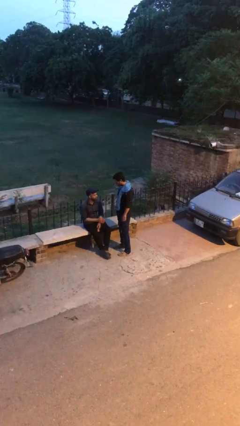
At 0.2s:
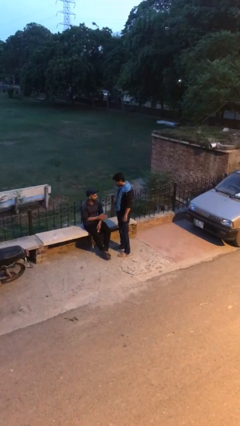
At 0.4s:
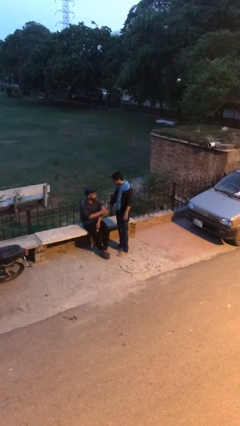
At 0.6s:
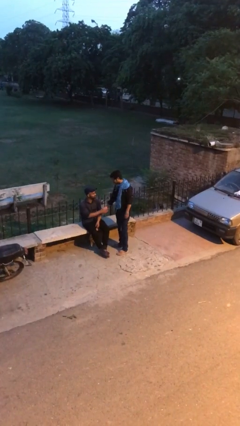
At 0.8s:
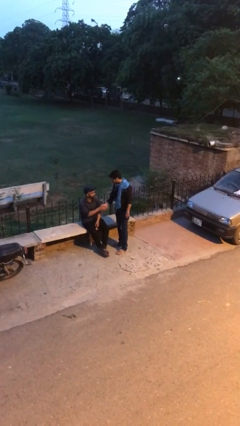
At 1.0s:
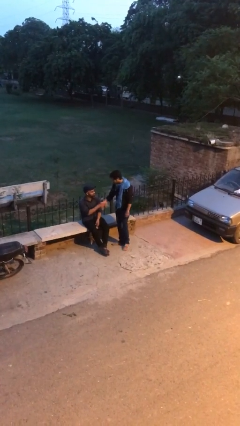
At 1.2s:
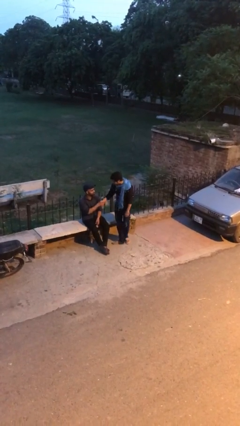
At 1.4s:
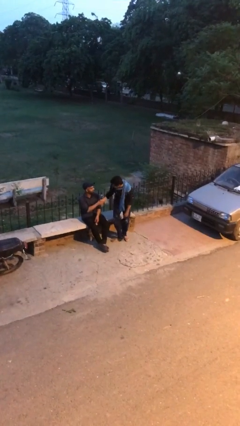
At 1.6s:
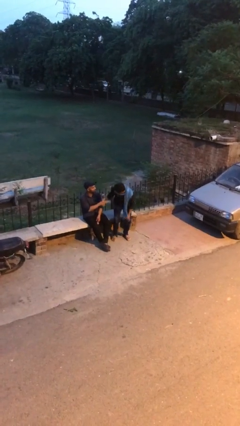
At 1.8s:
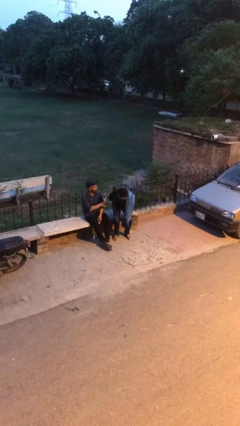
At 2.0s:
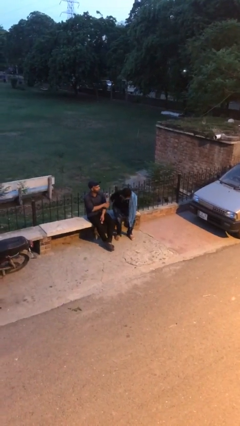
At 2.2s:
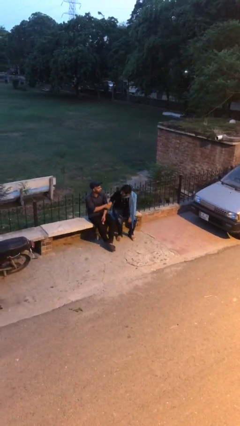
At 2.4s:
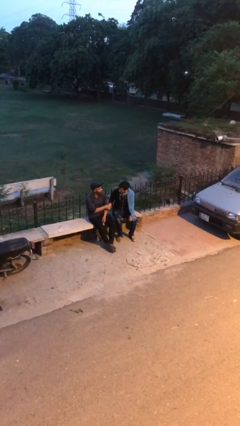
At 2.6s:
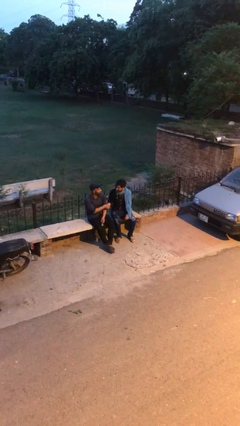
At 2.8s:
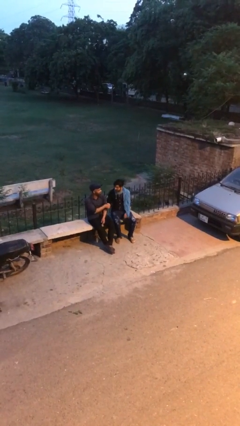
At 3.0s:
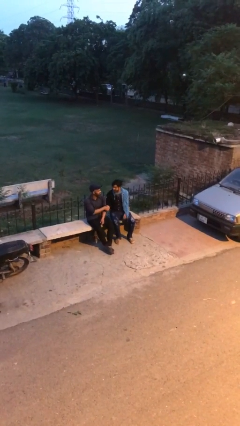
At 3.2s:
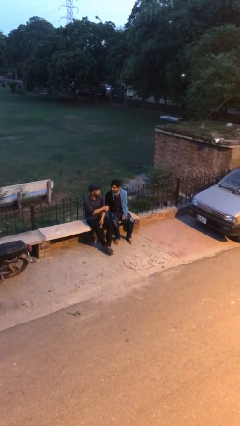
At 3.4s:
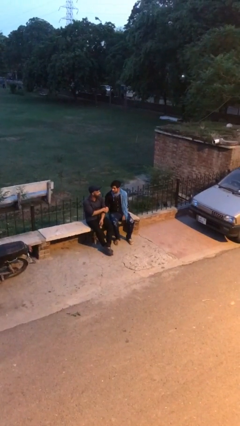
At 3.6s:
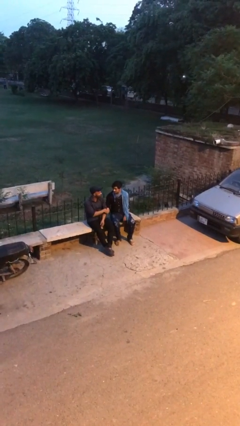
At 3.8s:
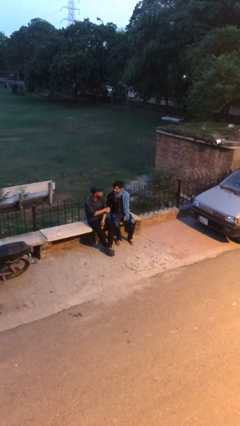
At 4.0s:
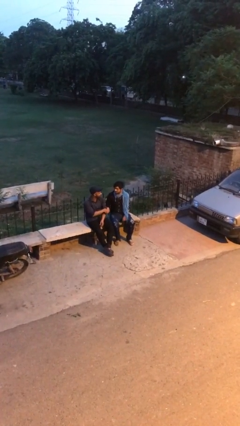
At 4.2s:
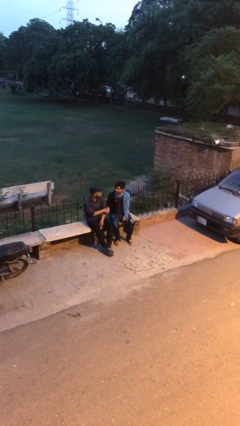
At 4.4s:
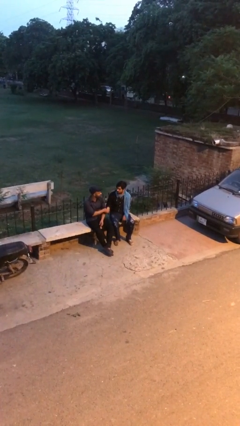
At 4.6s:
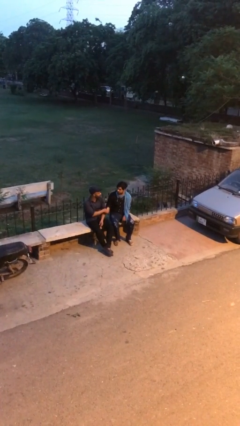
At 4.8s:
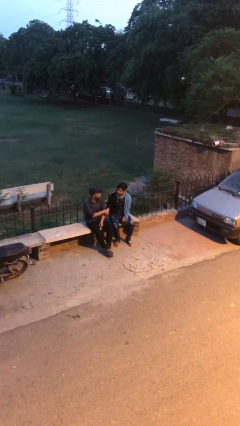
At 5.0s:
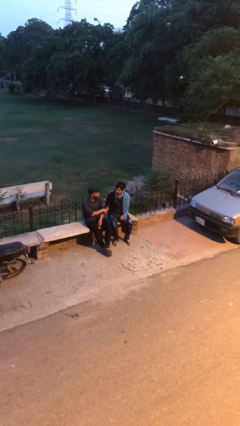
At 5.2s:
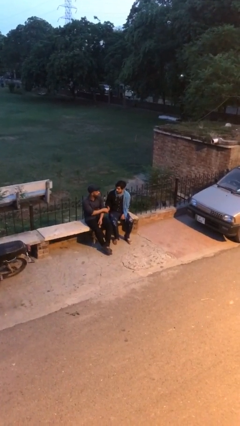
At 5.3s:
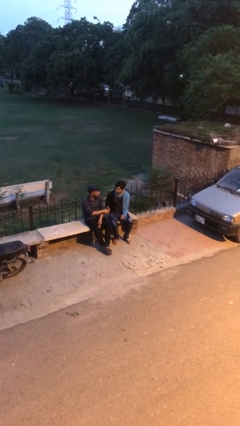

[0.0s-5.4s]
person shakes hand

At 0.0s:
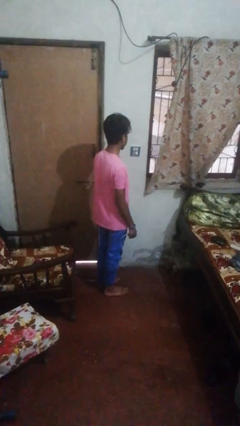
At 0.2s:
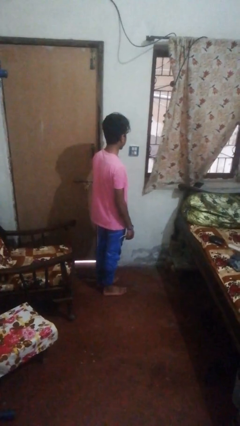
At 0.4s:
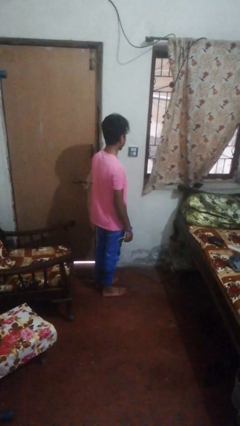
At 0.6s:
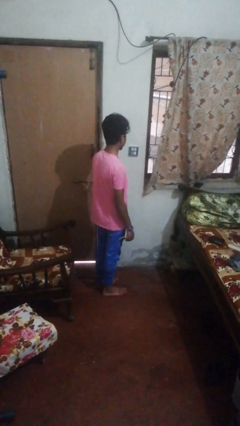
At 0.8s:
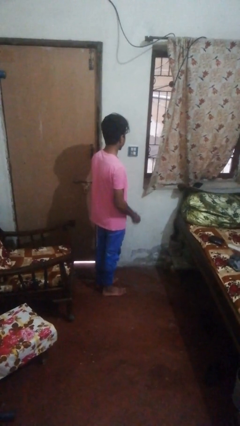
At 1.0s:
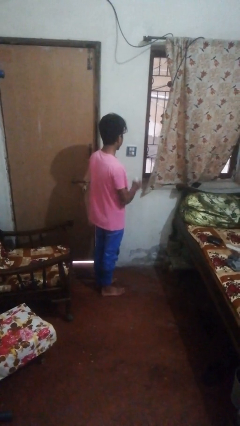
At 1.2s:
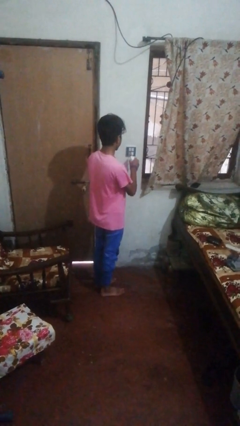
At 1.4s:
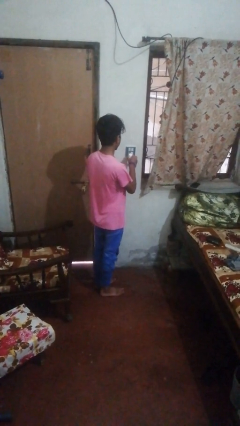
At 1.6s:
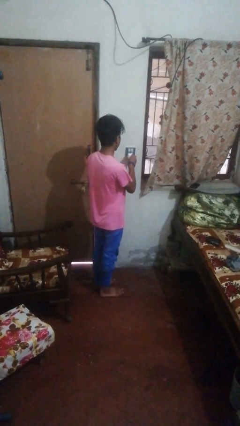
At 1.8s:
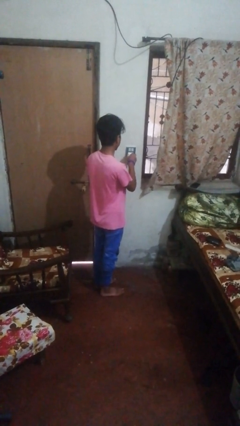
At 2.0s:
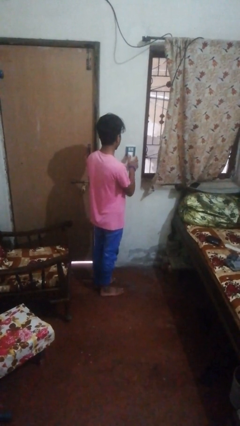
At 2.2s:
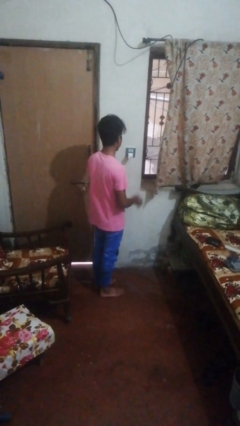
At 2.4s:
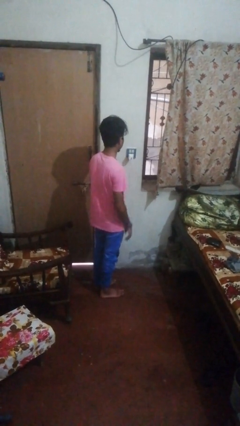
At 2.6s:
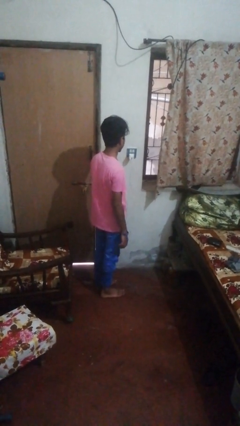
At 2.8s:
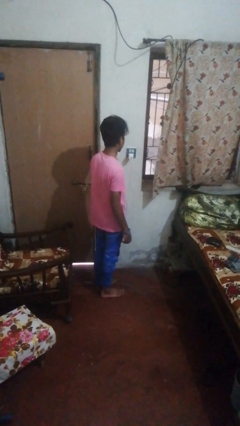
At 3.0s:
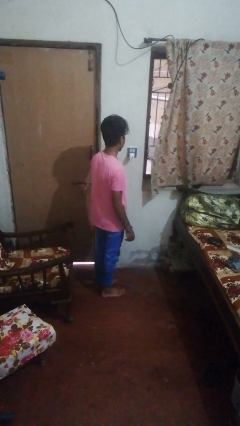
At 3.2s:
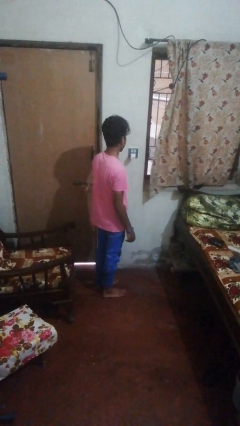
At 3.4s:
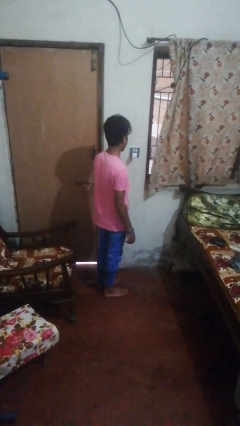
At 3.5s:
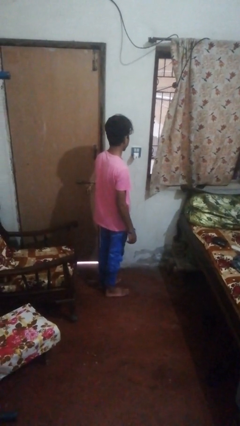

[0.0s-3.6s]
person plugs into electrical socket

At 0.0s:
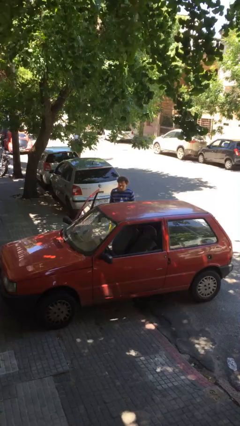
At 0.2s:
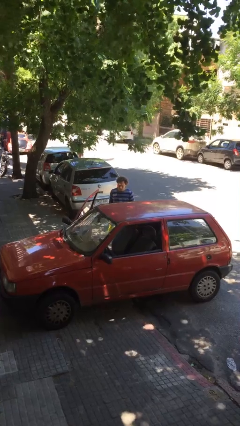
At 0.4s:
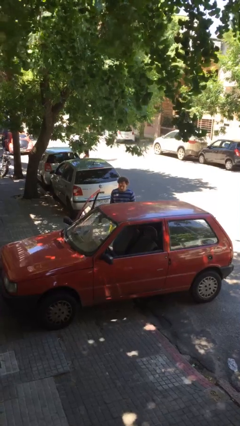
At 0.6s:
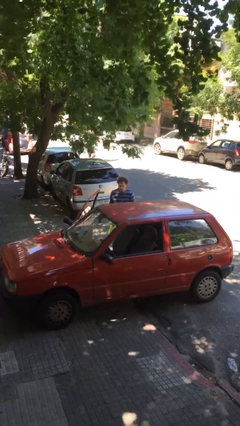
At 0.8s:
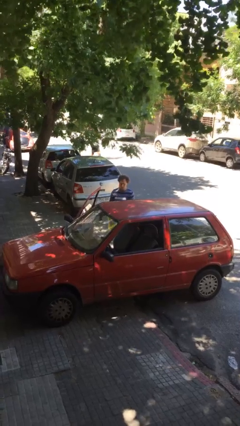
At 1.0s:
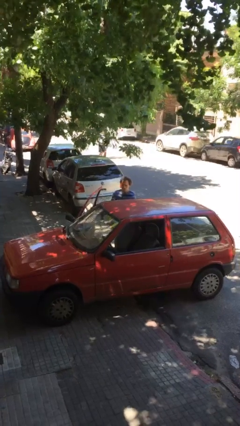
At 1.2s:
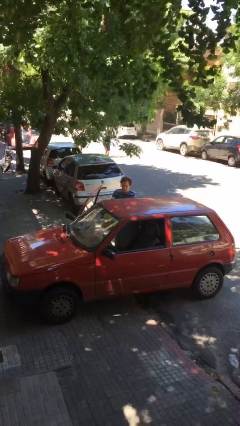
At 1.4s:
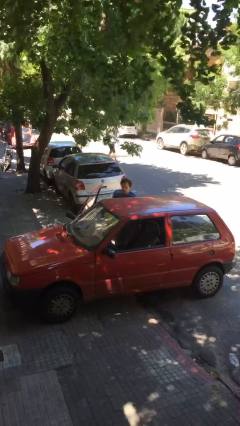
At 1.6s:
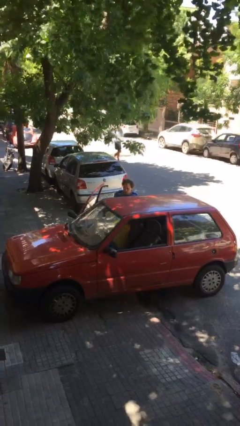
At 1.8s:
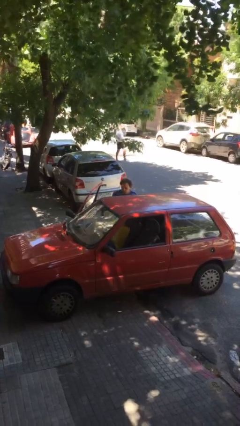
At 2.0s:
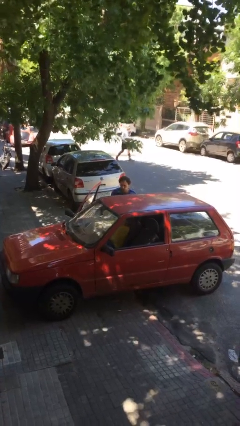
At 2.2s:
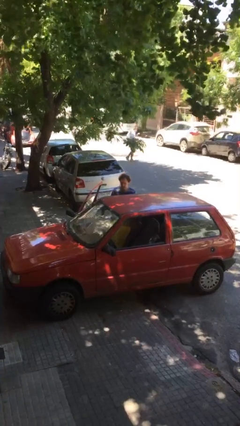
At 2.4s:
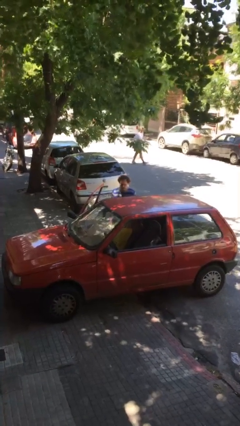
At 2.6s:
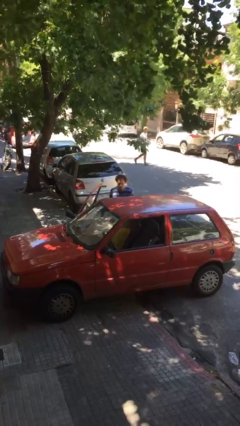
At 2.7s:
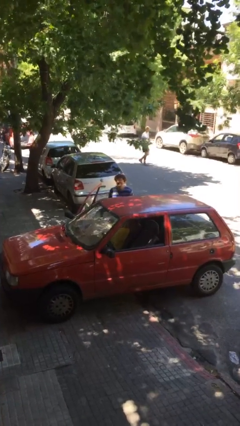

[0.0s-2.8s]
person loads car

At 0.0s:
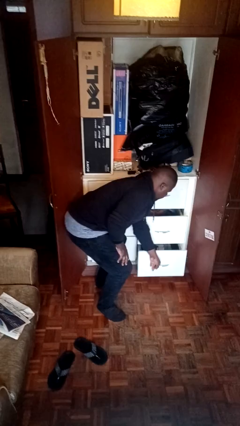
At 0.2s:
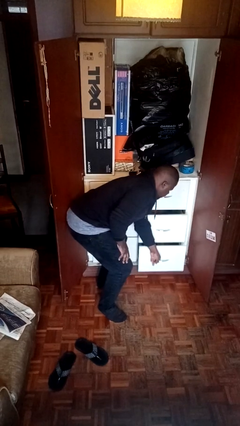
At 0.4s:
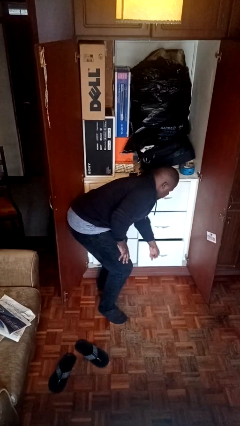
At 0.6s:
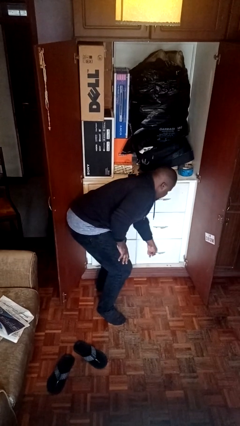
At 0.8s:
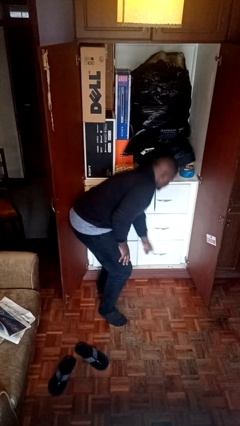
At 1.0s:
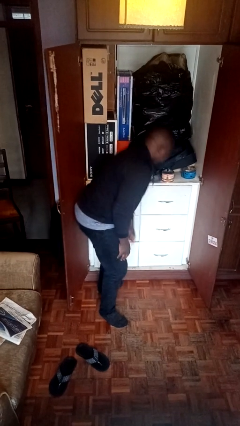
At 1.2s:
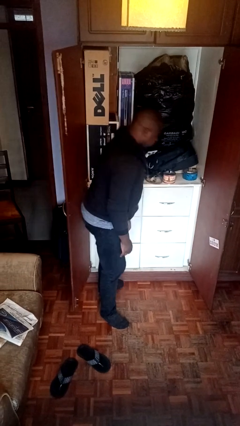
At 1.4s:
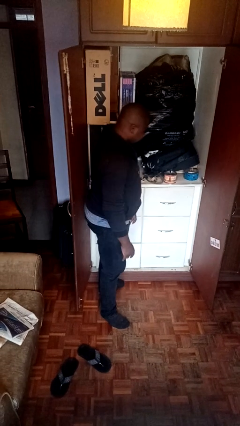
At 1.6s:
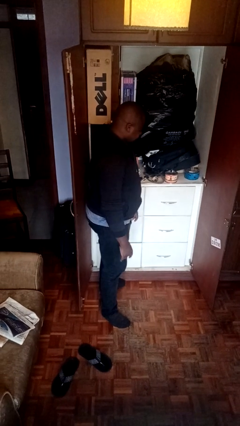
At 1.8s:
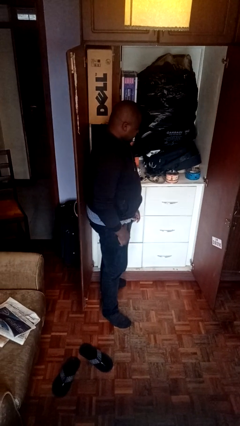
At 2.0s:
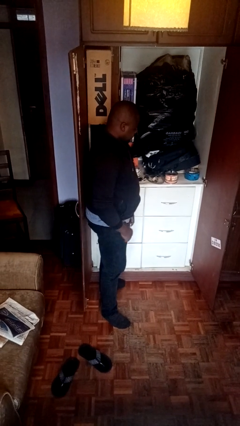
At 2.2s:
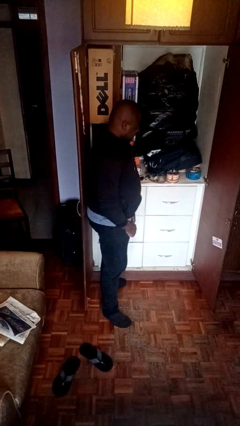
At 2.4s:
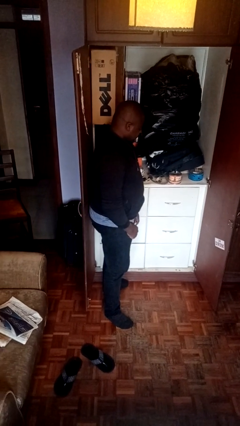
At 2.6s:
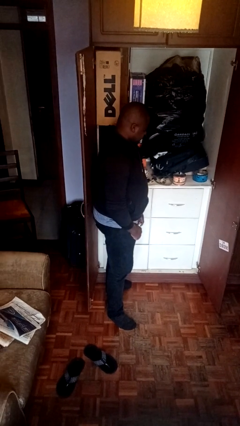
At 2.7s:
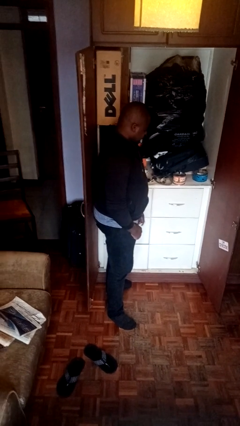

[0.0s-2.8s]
person closes dresser drawer

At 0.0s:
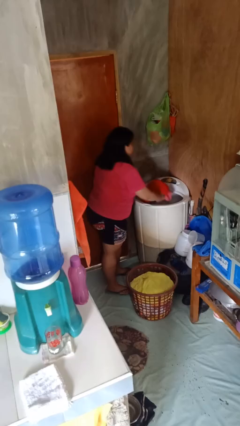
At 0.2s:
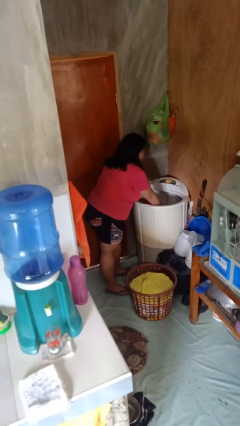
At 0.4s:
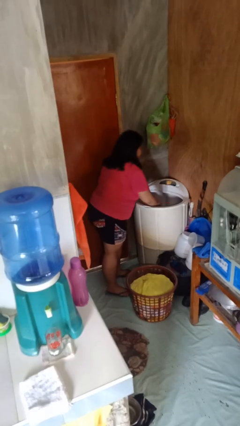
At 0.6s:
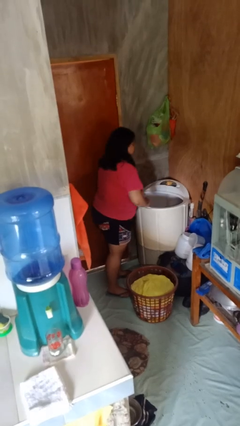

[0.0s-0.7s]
person loads clotheswasher

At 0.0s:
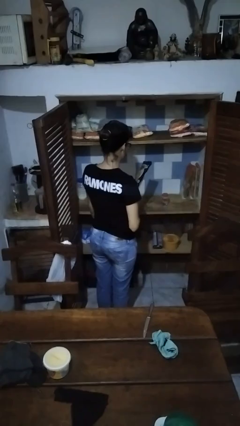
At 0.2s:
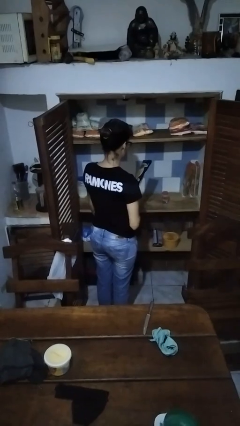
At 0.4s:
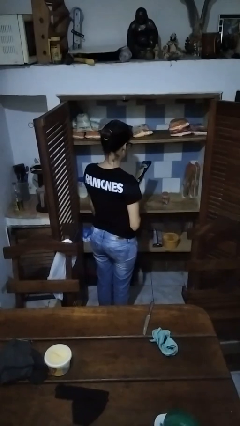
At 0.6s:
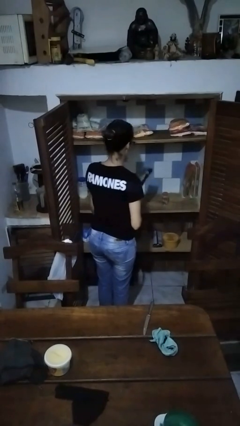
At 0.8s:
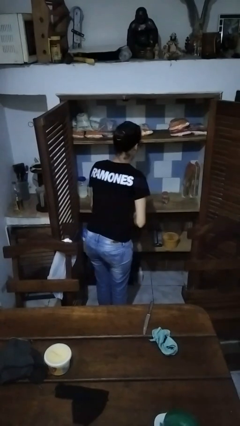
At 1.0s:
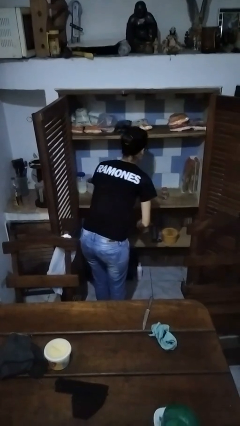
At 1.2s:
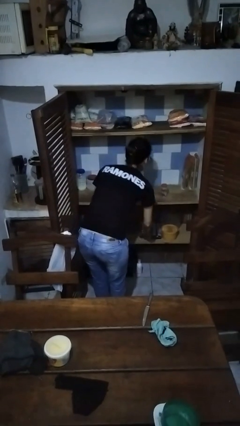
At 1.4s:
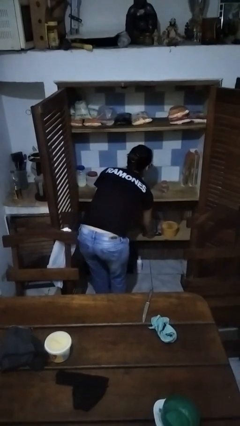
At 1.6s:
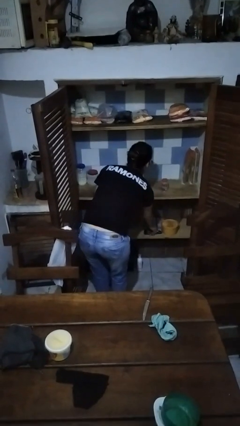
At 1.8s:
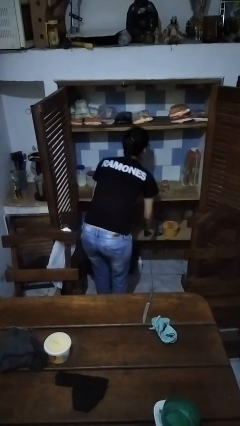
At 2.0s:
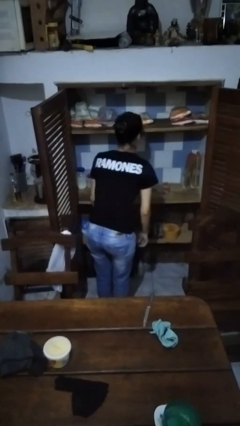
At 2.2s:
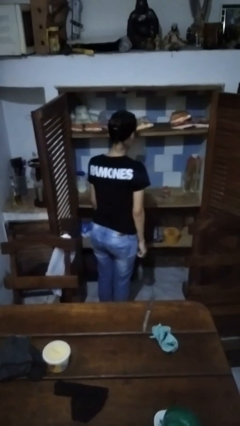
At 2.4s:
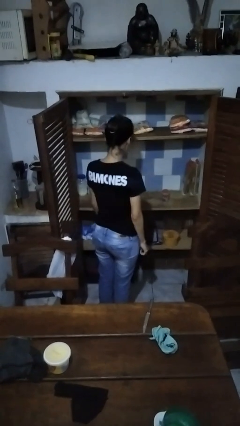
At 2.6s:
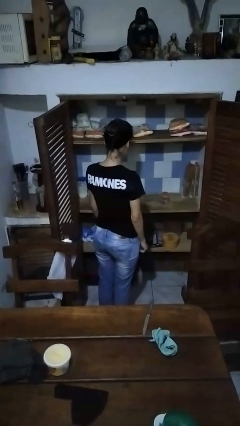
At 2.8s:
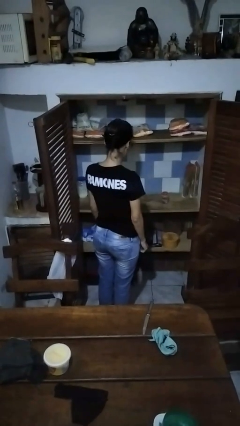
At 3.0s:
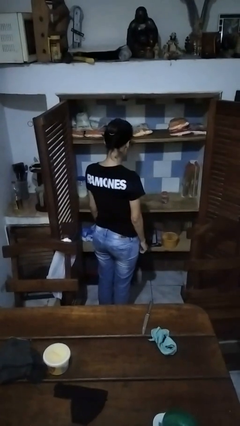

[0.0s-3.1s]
person puts object in cabinet
